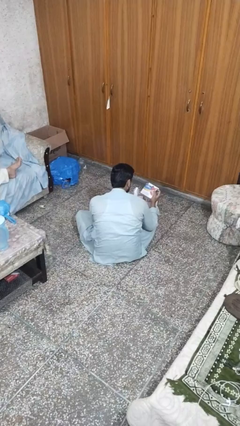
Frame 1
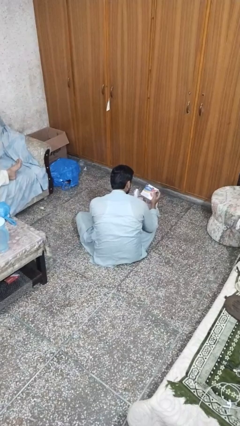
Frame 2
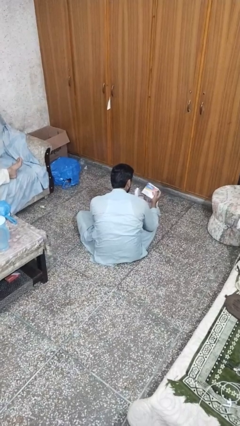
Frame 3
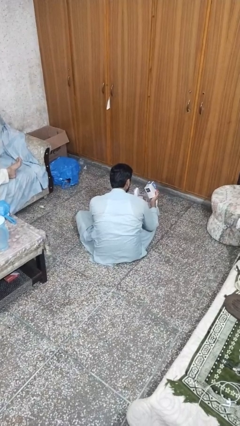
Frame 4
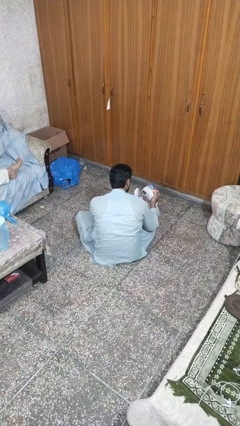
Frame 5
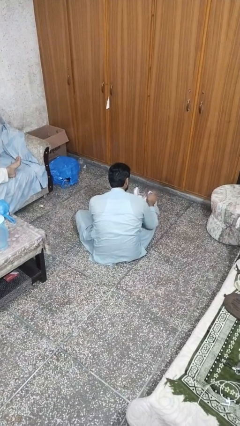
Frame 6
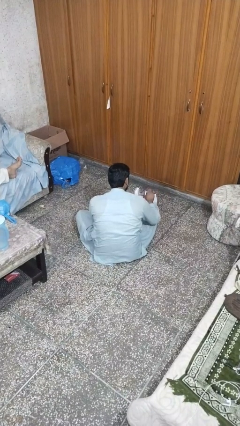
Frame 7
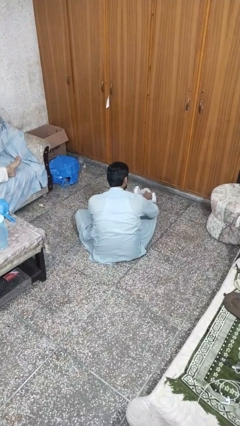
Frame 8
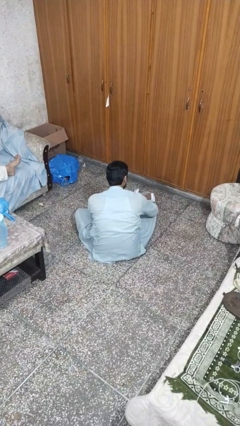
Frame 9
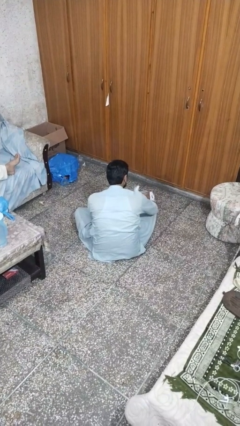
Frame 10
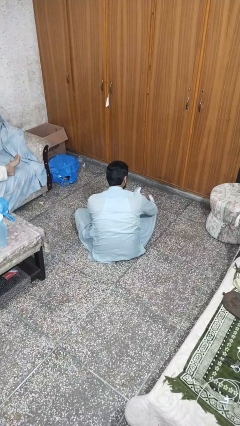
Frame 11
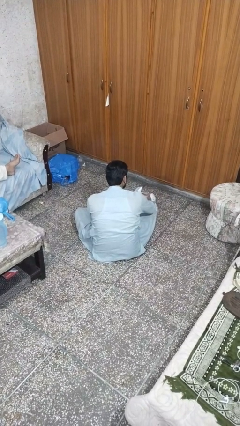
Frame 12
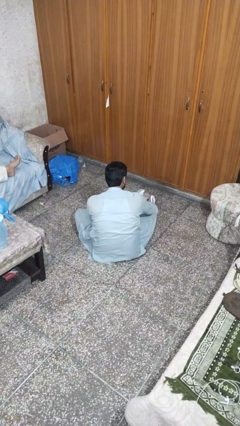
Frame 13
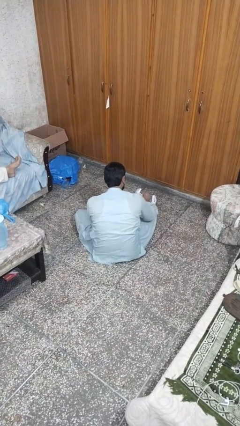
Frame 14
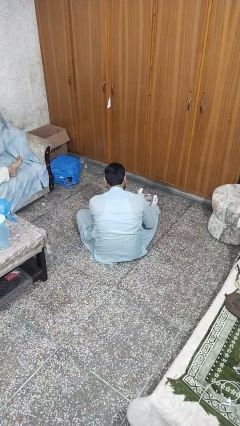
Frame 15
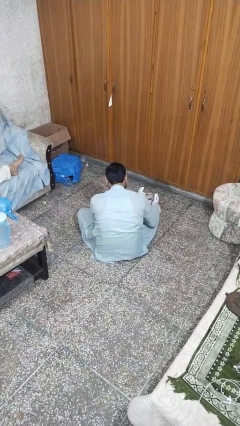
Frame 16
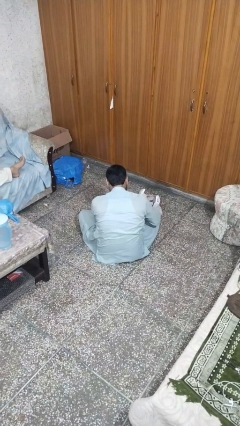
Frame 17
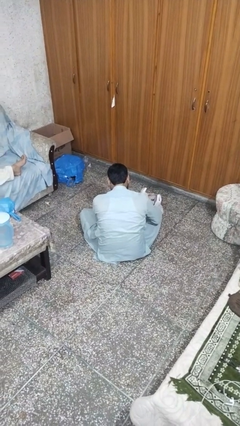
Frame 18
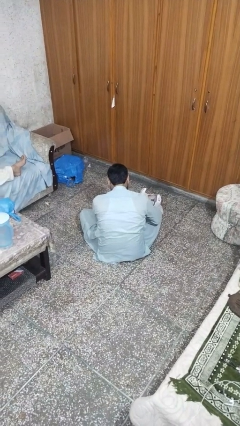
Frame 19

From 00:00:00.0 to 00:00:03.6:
person puts object into bag

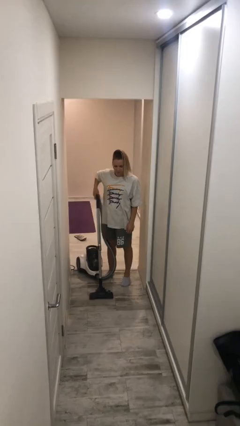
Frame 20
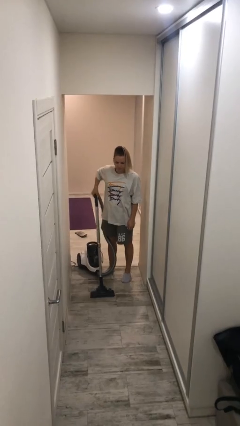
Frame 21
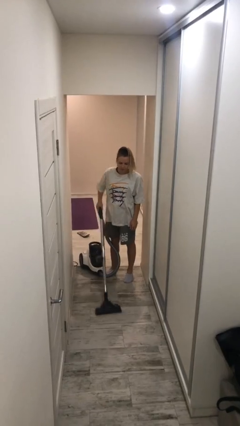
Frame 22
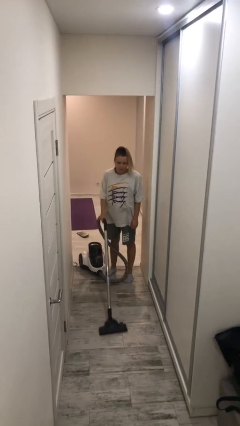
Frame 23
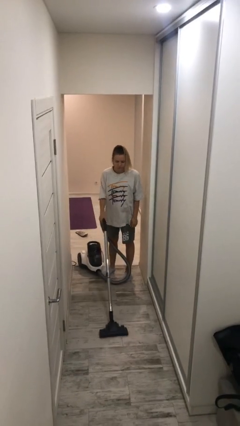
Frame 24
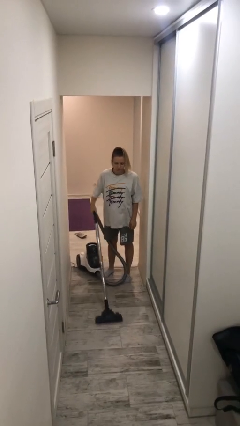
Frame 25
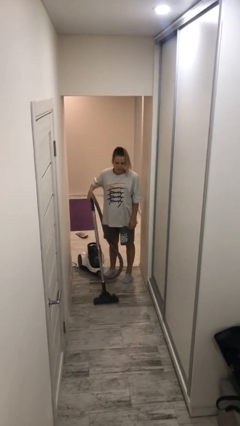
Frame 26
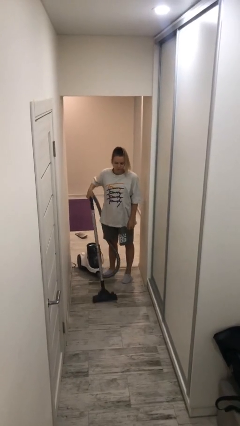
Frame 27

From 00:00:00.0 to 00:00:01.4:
person vacuums carpet

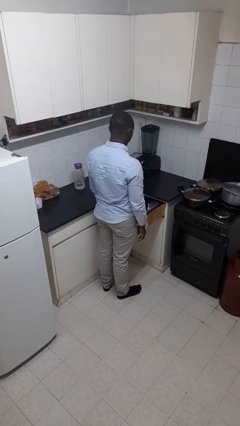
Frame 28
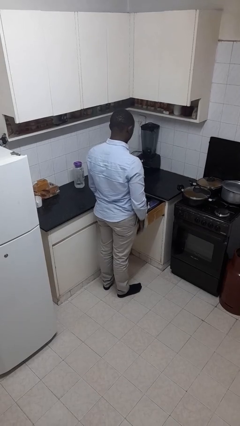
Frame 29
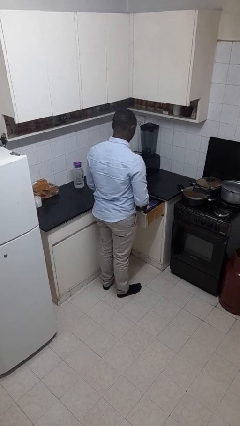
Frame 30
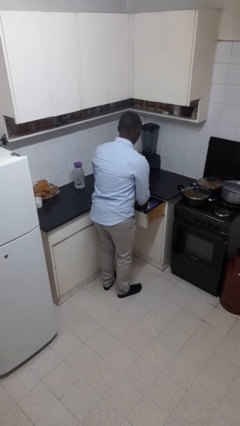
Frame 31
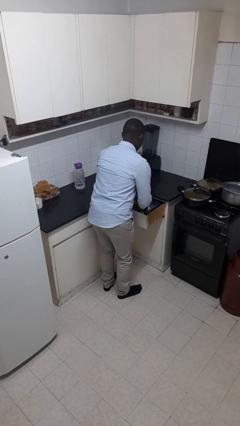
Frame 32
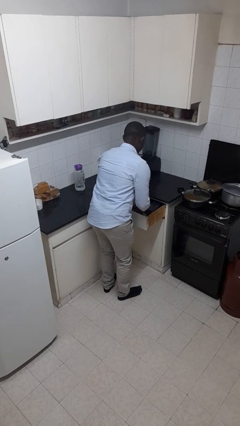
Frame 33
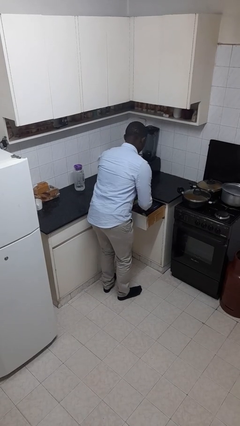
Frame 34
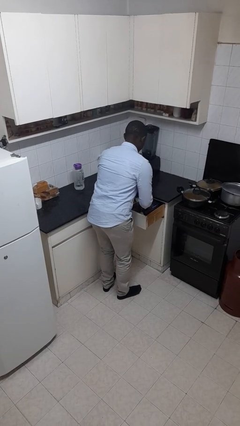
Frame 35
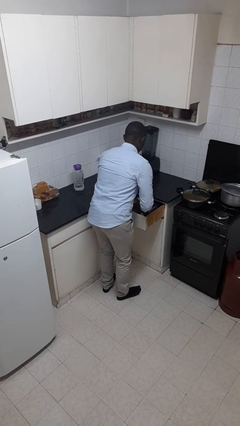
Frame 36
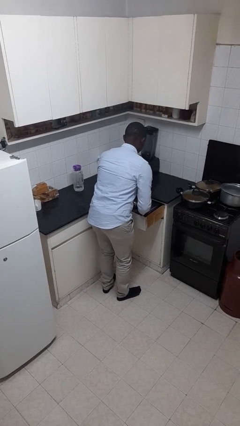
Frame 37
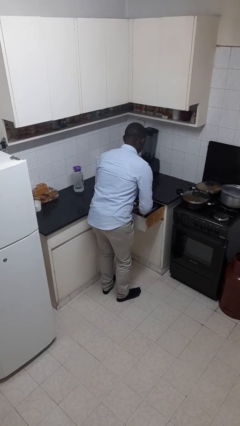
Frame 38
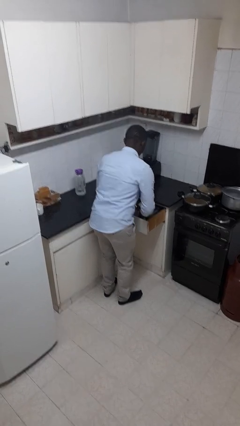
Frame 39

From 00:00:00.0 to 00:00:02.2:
person searches in kitchen drawer

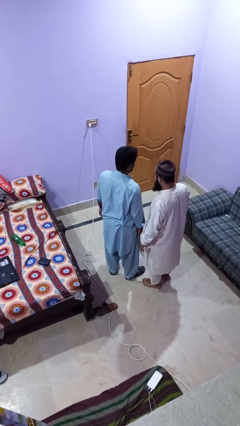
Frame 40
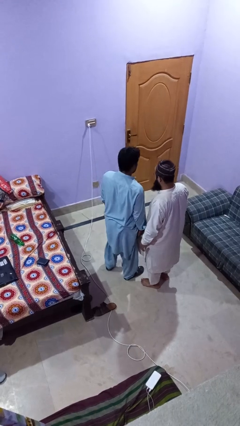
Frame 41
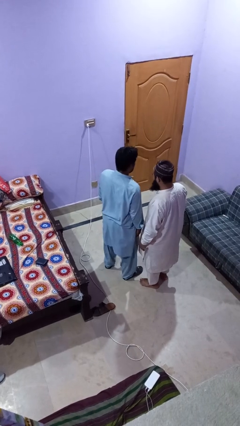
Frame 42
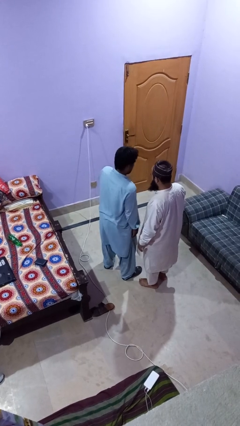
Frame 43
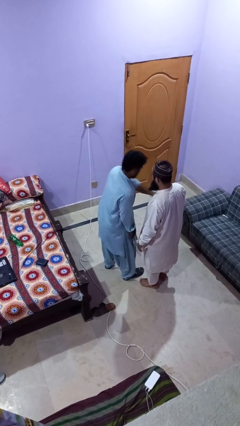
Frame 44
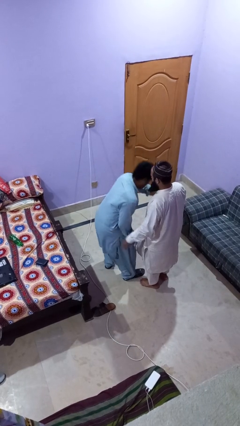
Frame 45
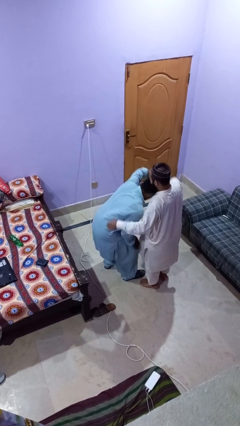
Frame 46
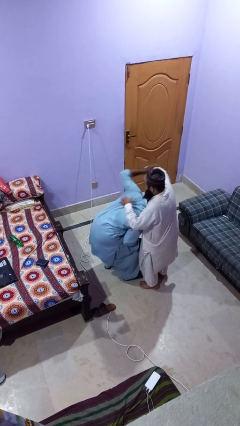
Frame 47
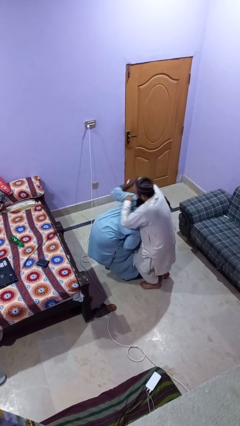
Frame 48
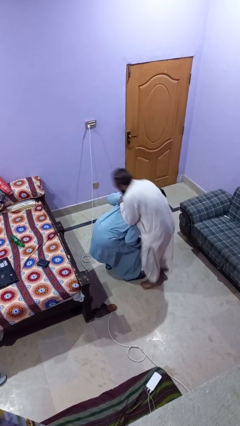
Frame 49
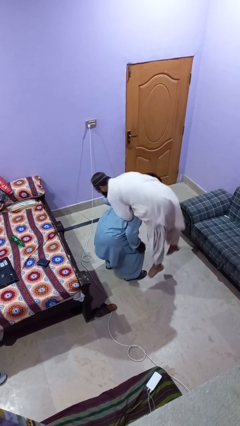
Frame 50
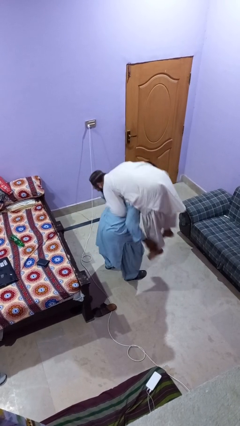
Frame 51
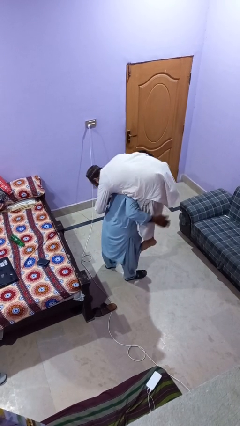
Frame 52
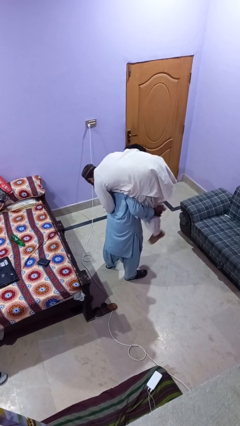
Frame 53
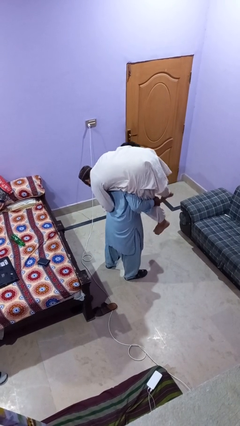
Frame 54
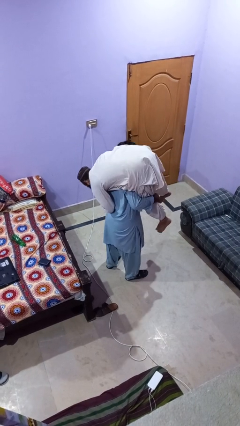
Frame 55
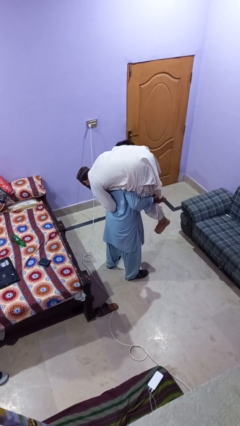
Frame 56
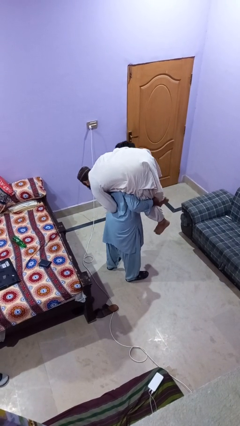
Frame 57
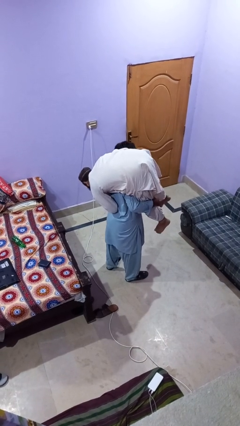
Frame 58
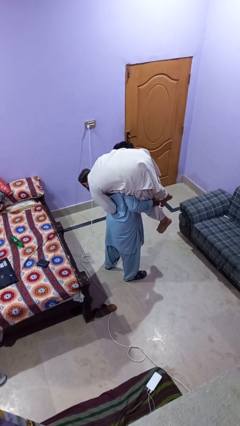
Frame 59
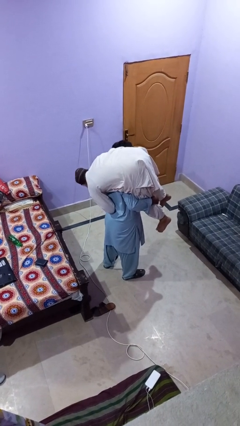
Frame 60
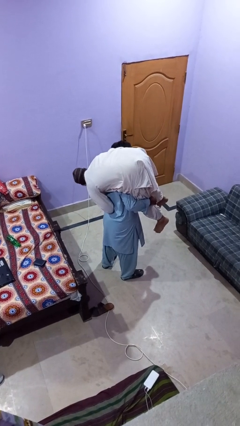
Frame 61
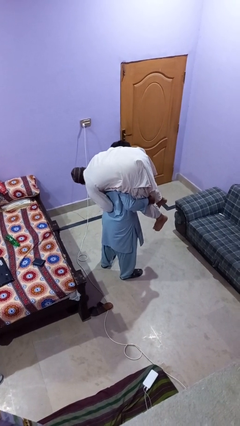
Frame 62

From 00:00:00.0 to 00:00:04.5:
person carries person on shoulders

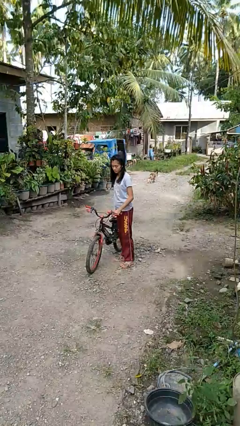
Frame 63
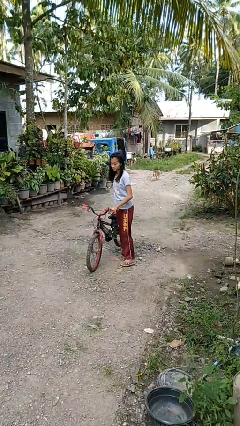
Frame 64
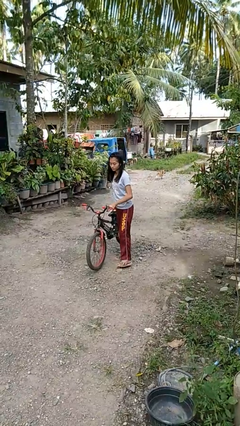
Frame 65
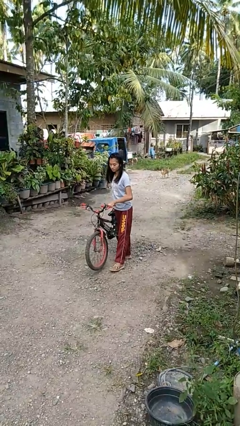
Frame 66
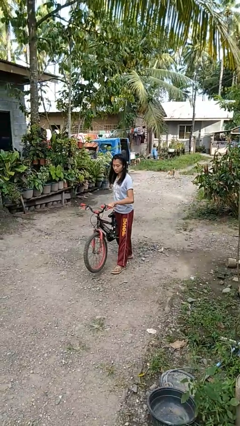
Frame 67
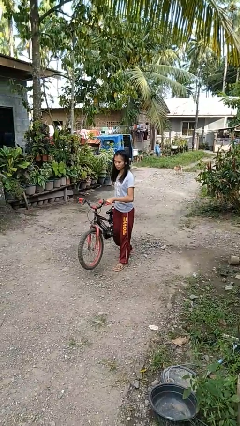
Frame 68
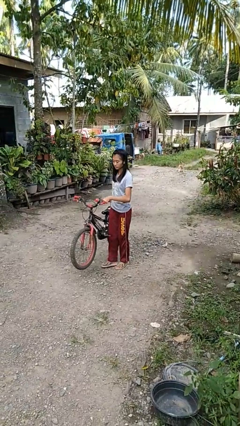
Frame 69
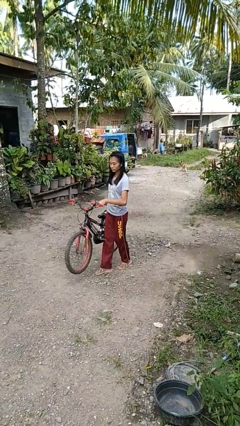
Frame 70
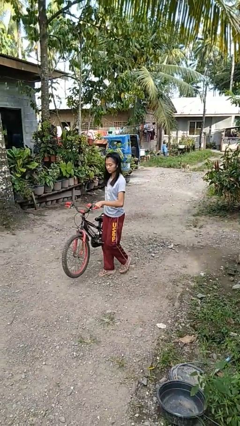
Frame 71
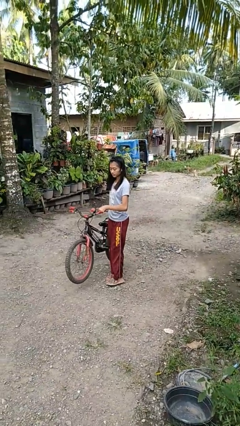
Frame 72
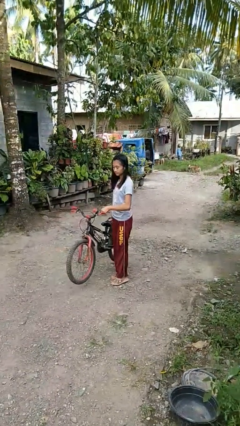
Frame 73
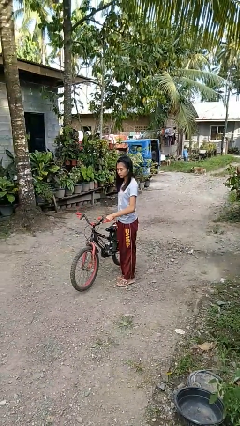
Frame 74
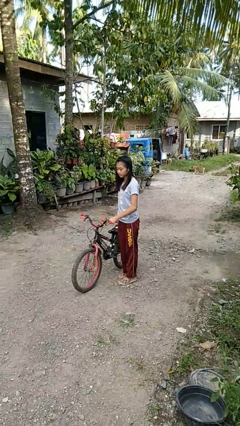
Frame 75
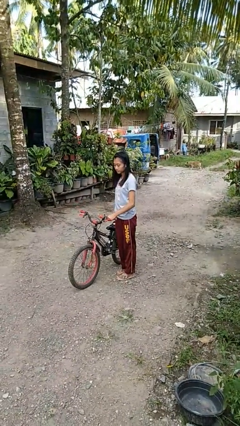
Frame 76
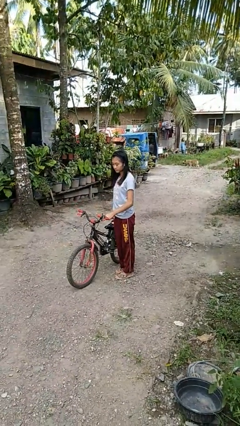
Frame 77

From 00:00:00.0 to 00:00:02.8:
person carries bicycle

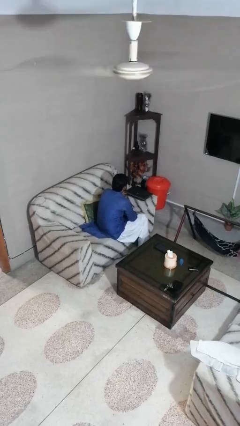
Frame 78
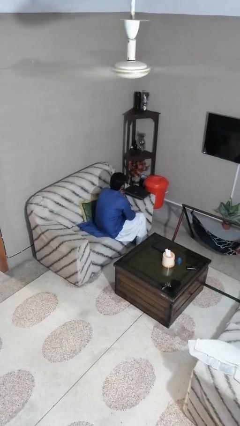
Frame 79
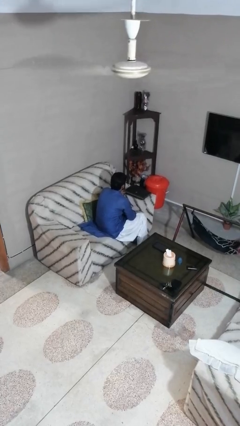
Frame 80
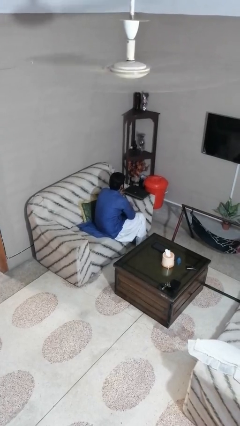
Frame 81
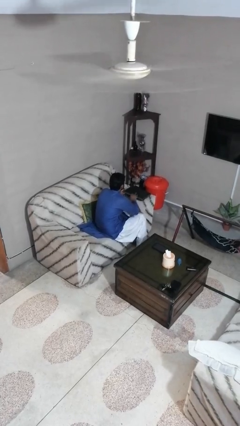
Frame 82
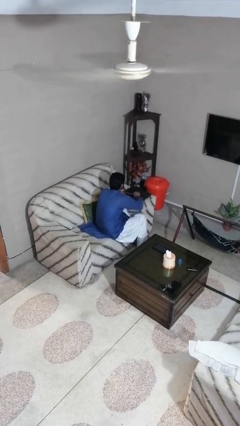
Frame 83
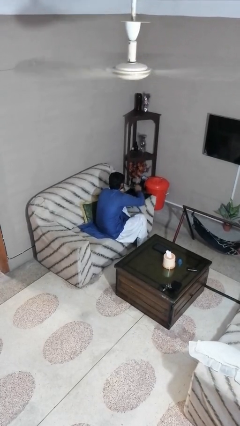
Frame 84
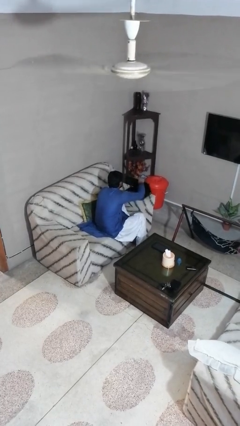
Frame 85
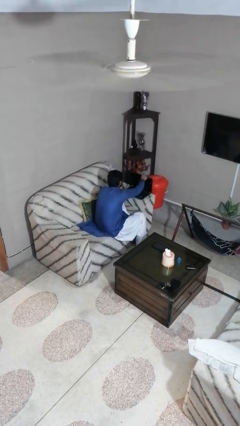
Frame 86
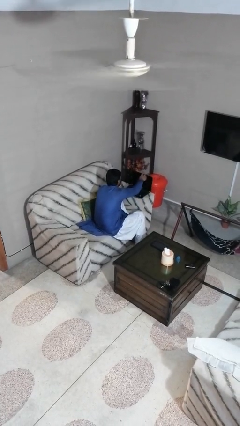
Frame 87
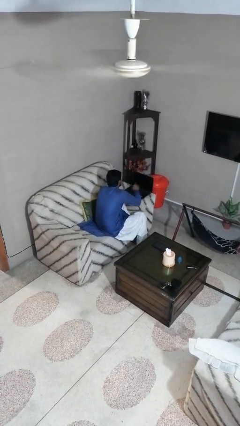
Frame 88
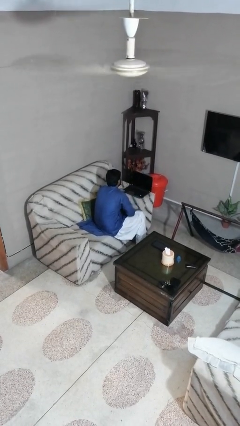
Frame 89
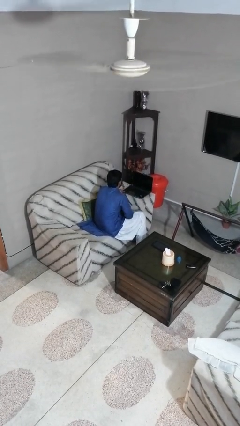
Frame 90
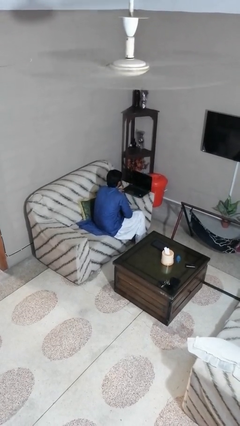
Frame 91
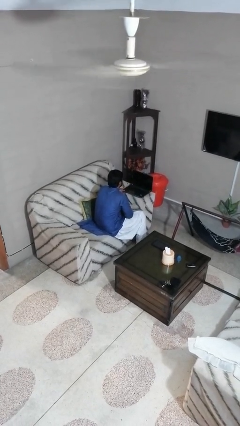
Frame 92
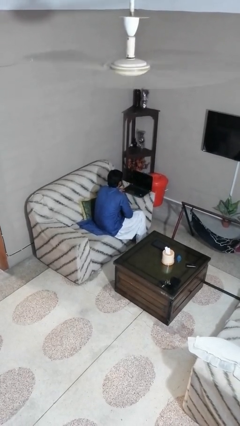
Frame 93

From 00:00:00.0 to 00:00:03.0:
person opens laptop

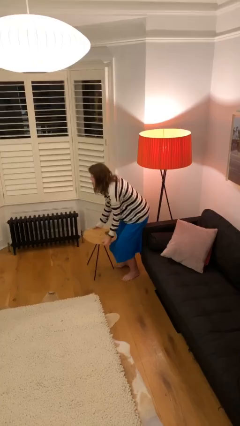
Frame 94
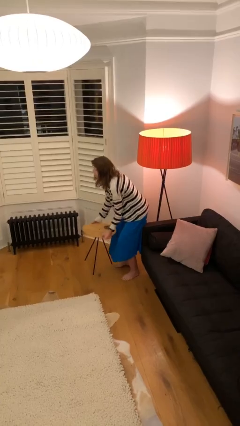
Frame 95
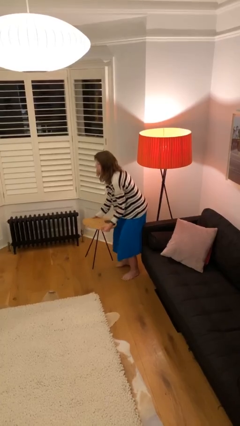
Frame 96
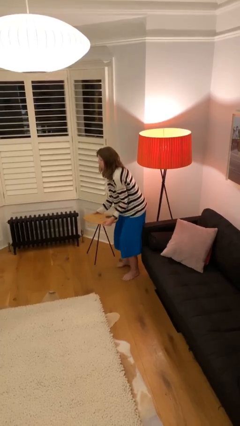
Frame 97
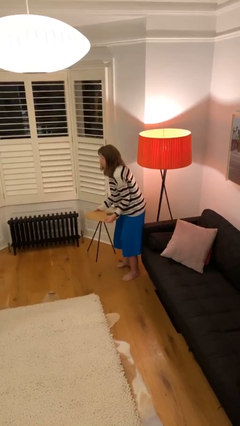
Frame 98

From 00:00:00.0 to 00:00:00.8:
person picks up object from floor
